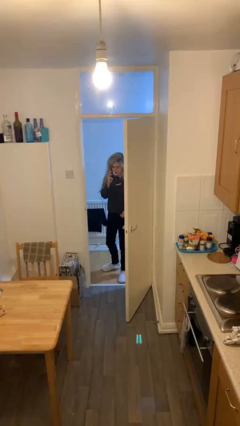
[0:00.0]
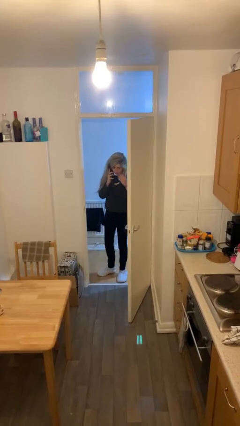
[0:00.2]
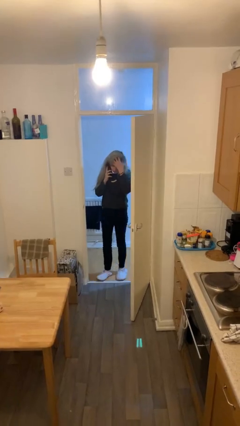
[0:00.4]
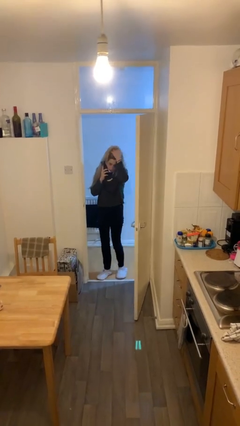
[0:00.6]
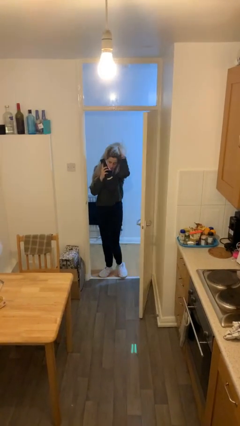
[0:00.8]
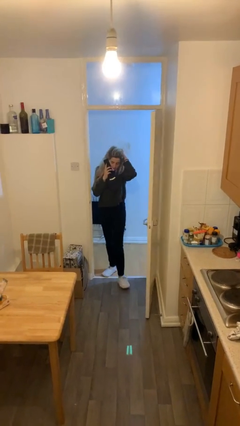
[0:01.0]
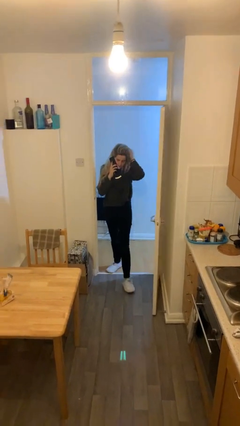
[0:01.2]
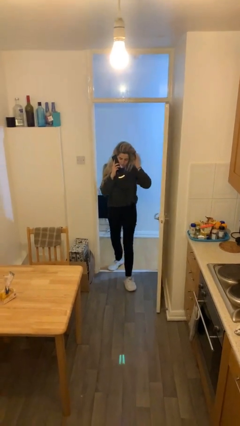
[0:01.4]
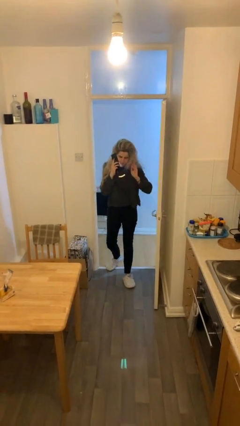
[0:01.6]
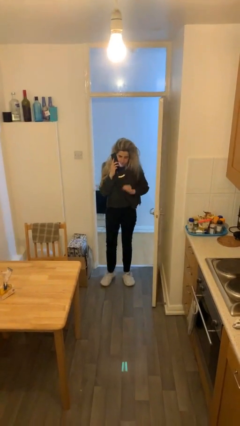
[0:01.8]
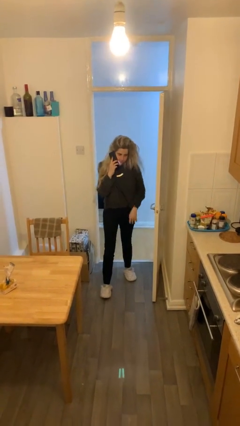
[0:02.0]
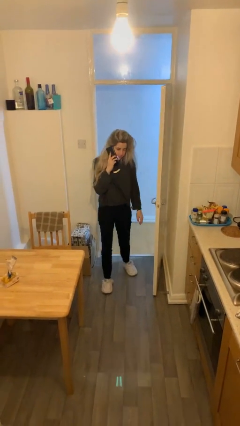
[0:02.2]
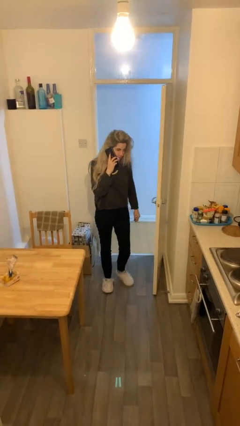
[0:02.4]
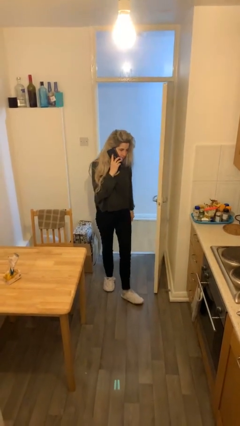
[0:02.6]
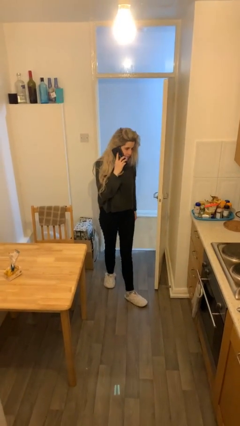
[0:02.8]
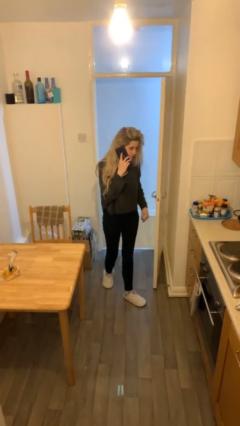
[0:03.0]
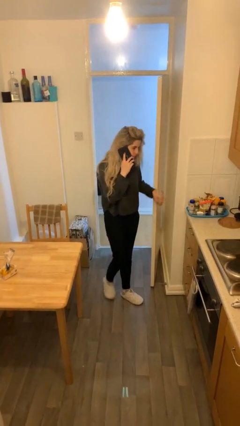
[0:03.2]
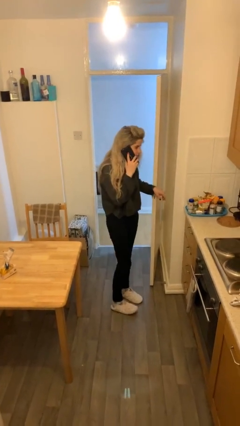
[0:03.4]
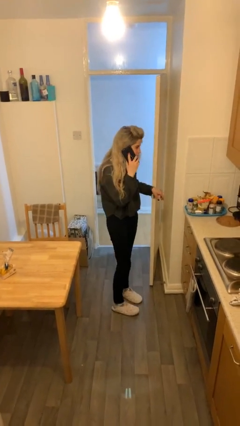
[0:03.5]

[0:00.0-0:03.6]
person enters scene through structure

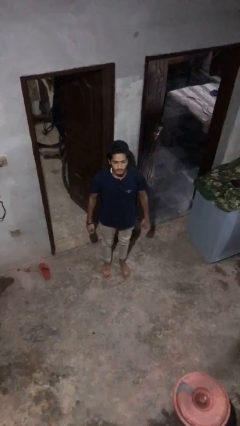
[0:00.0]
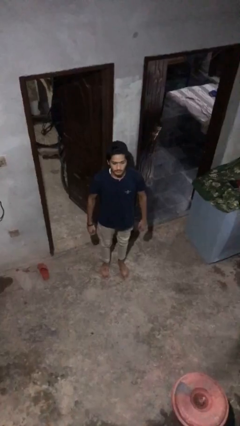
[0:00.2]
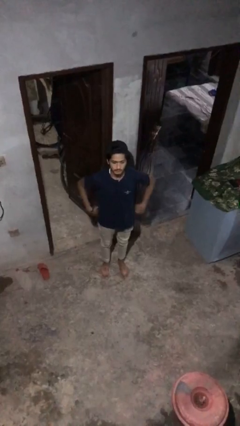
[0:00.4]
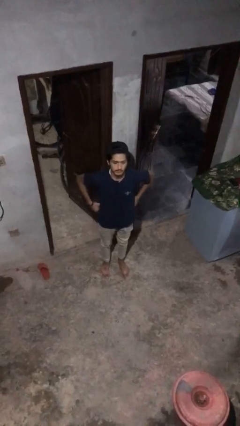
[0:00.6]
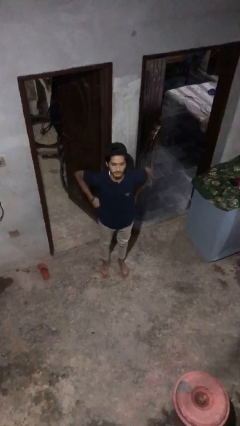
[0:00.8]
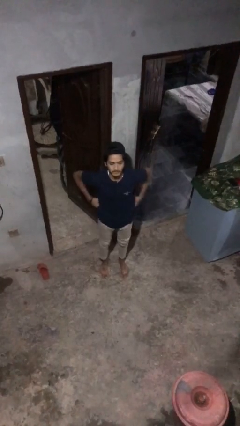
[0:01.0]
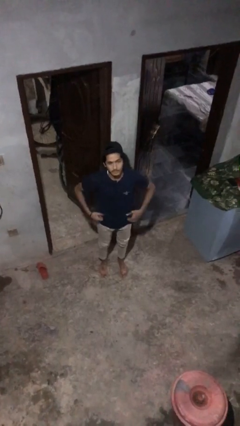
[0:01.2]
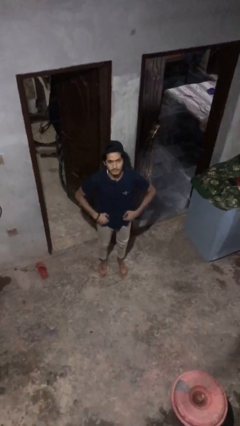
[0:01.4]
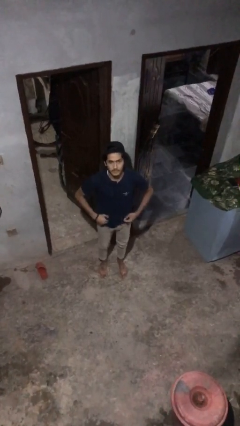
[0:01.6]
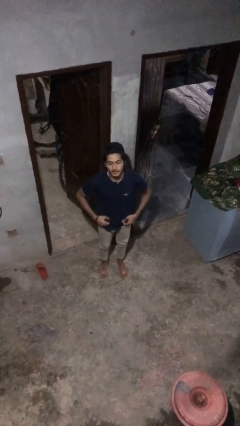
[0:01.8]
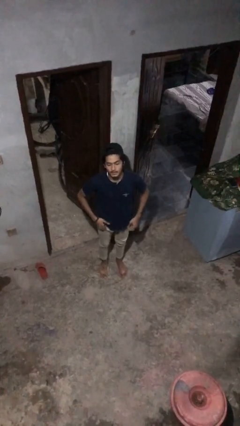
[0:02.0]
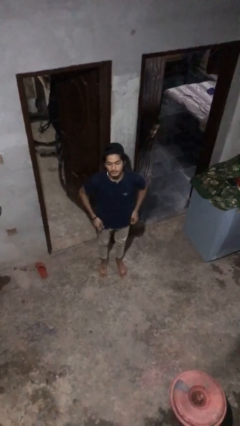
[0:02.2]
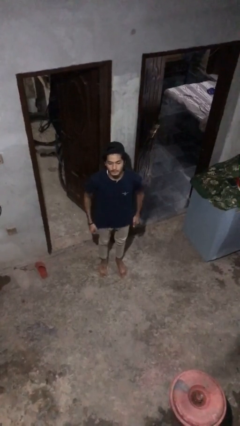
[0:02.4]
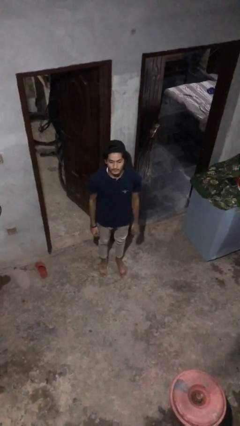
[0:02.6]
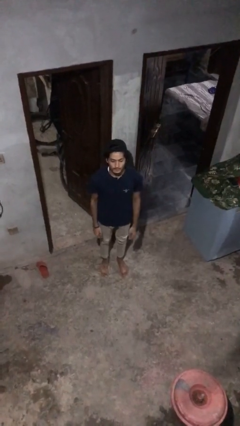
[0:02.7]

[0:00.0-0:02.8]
person hikes up pants

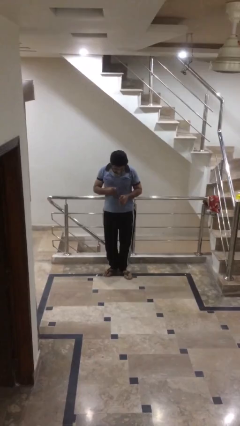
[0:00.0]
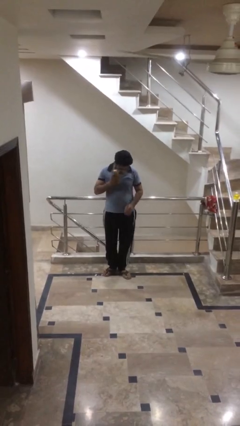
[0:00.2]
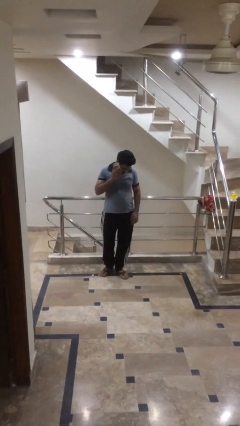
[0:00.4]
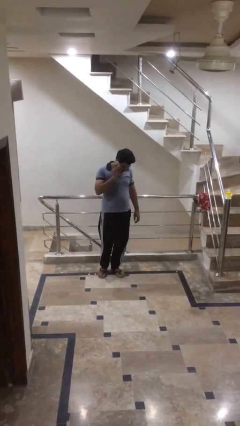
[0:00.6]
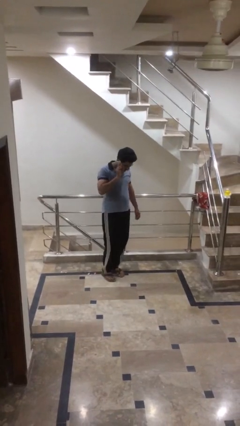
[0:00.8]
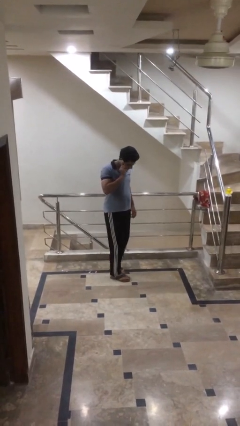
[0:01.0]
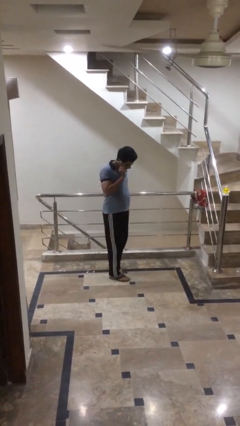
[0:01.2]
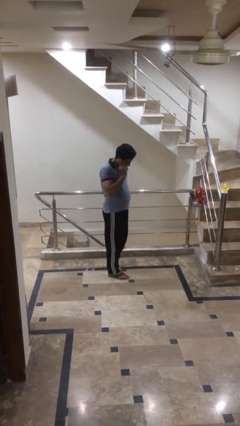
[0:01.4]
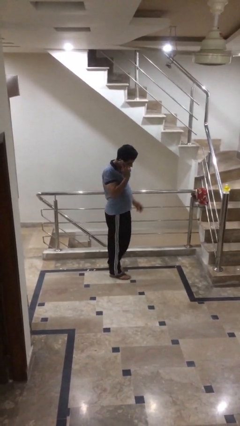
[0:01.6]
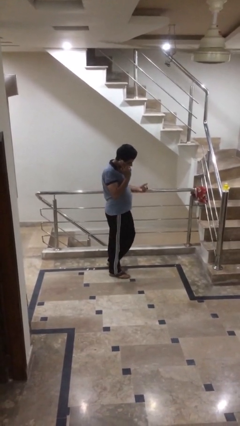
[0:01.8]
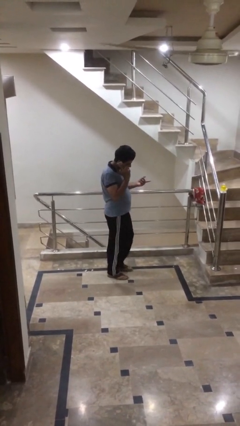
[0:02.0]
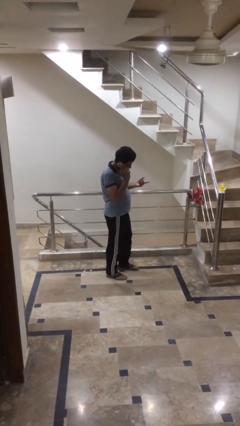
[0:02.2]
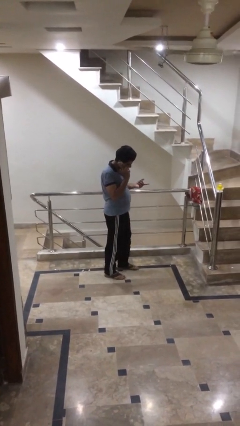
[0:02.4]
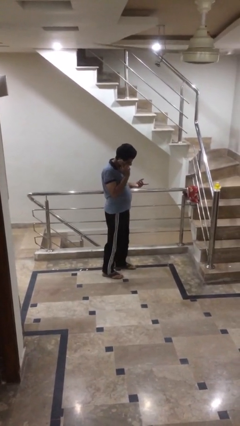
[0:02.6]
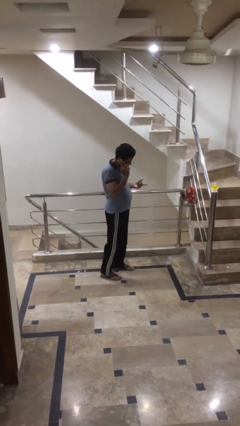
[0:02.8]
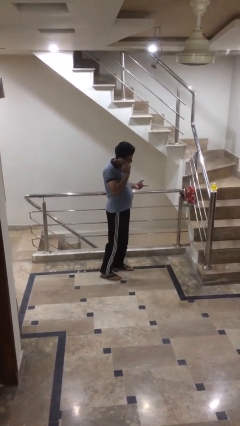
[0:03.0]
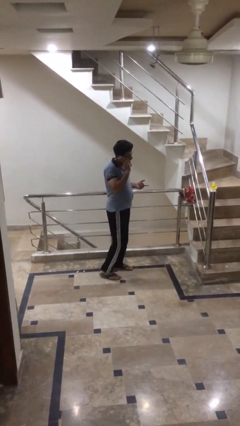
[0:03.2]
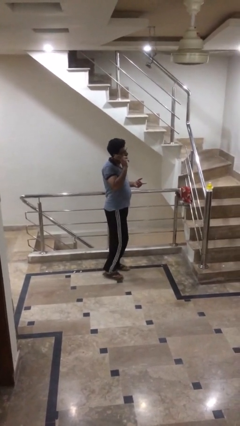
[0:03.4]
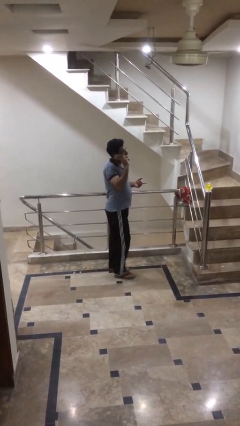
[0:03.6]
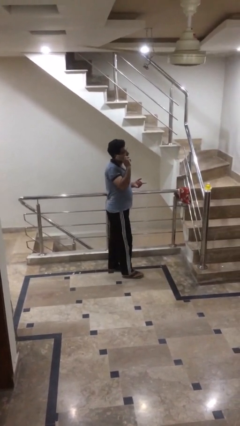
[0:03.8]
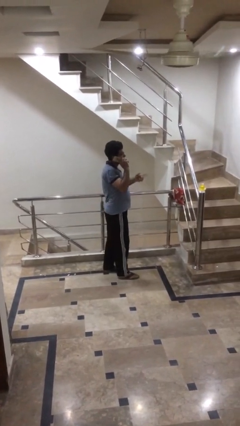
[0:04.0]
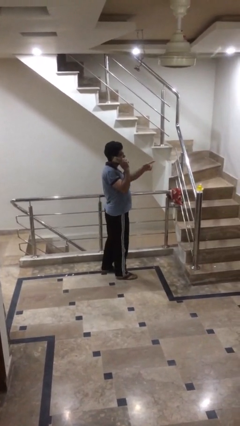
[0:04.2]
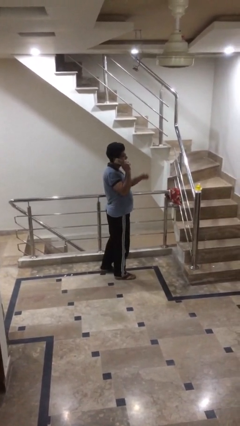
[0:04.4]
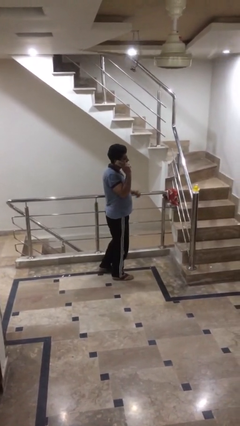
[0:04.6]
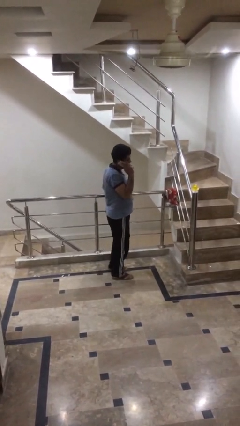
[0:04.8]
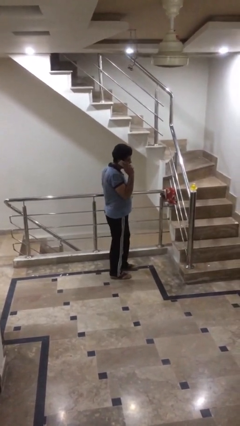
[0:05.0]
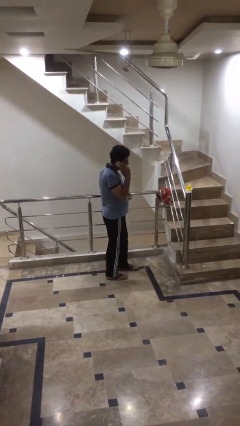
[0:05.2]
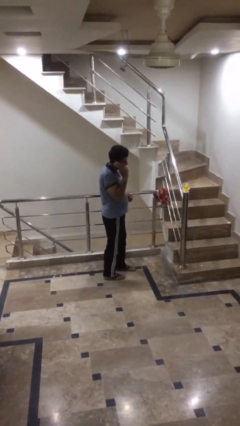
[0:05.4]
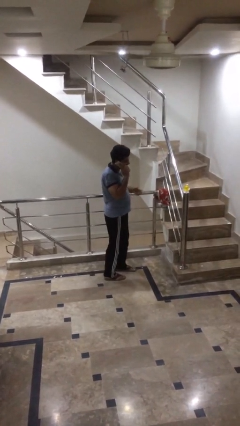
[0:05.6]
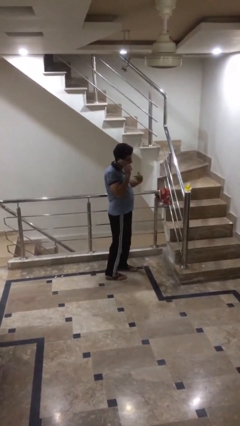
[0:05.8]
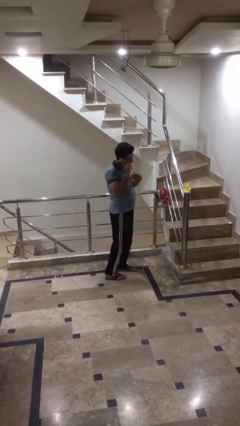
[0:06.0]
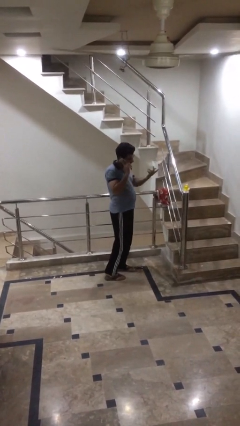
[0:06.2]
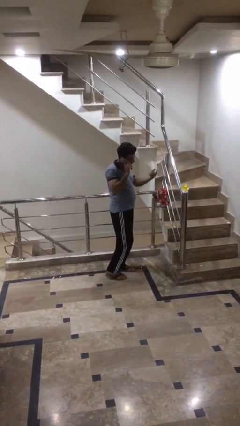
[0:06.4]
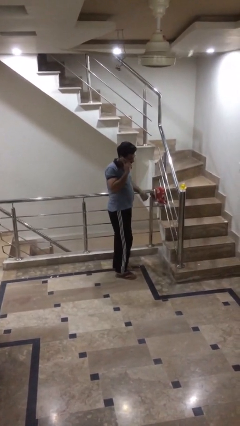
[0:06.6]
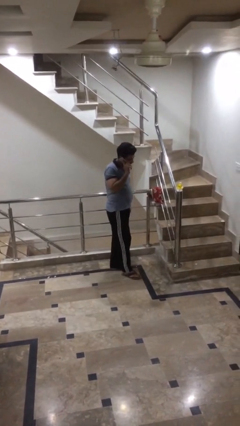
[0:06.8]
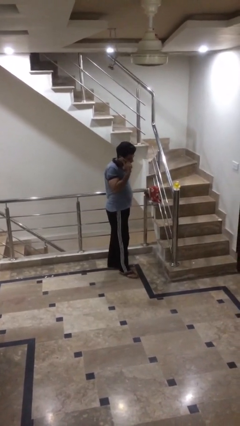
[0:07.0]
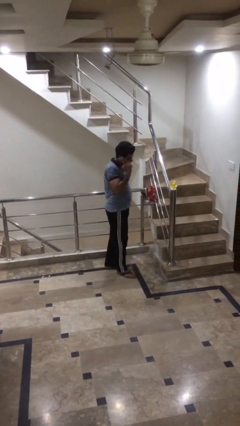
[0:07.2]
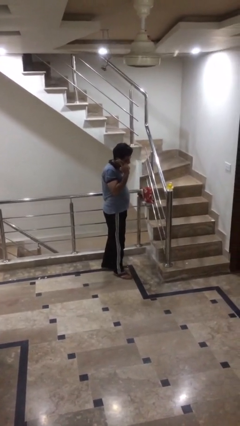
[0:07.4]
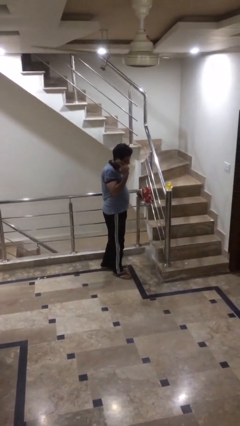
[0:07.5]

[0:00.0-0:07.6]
person talks on phone

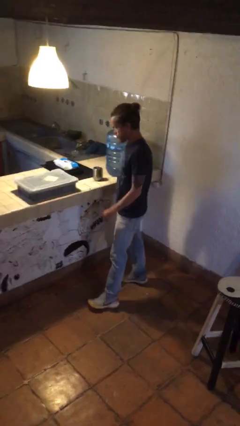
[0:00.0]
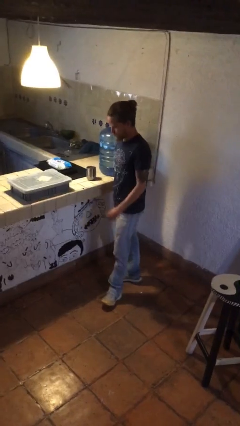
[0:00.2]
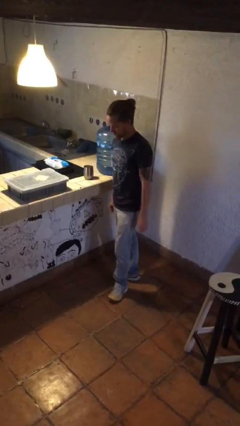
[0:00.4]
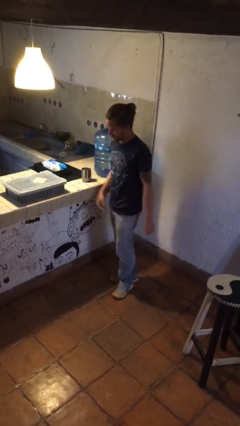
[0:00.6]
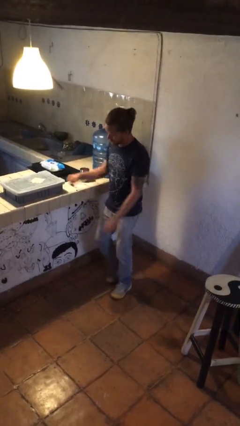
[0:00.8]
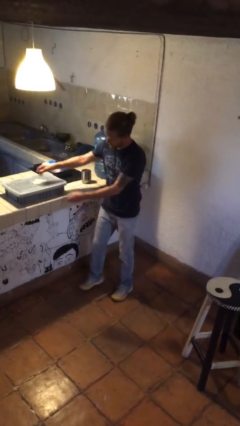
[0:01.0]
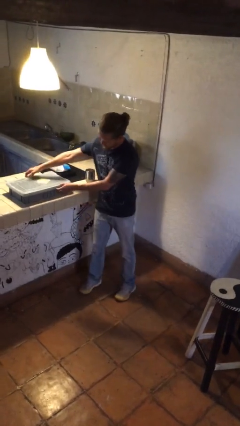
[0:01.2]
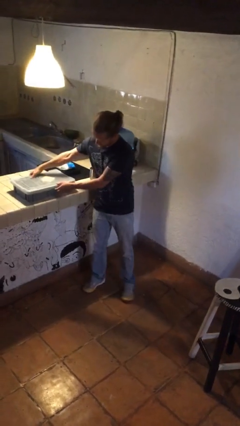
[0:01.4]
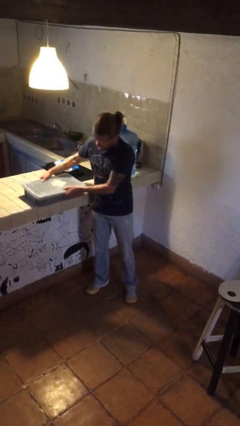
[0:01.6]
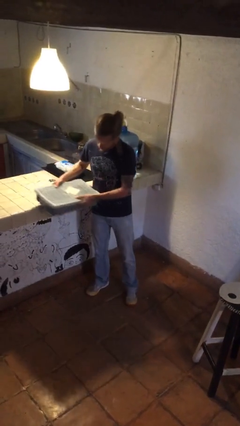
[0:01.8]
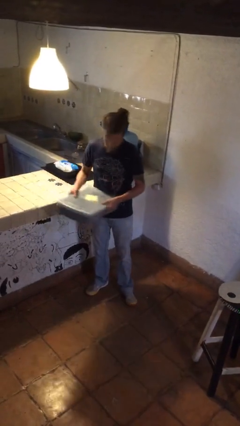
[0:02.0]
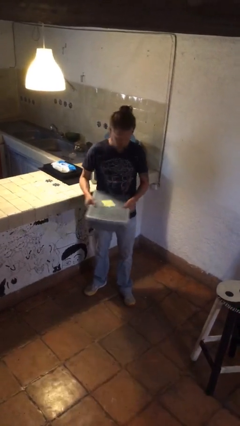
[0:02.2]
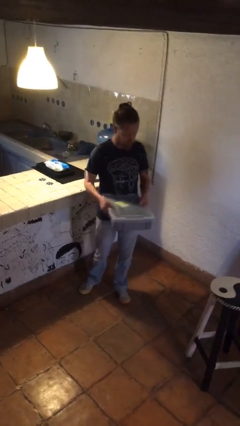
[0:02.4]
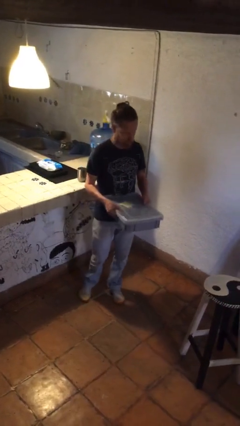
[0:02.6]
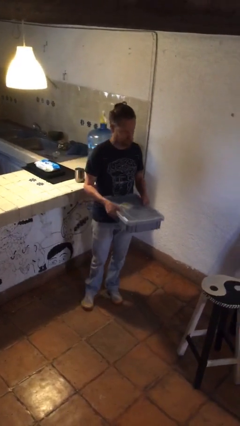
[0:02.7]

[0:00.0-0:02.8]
person picks up object from countertop

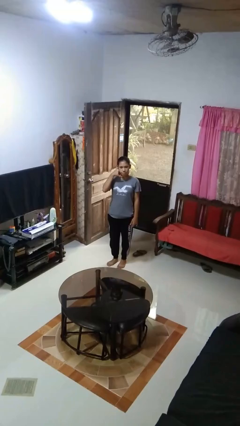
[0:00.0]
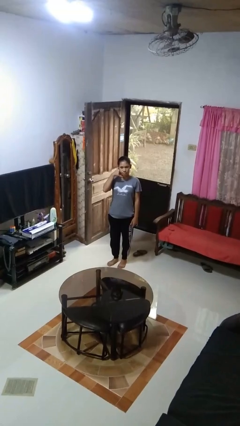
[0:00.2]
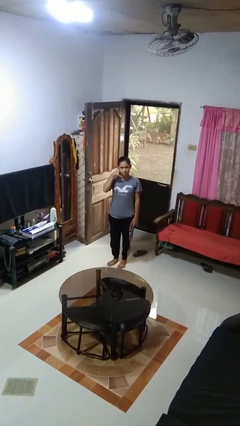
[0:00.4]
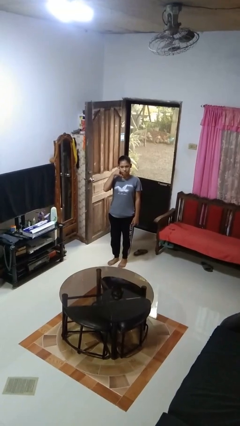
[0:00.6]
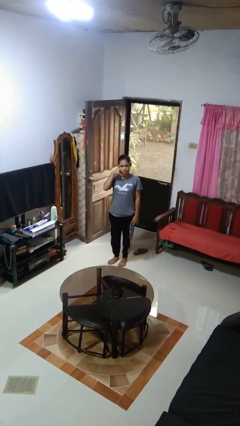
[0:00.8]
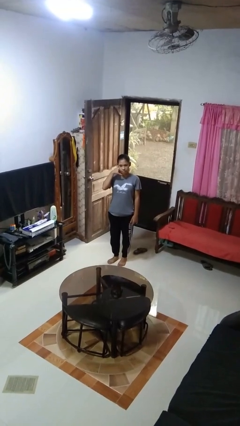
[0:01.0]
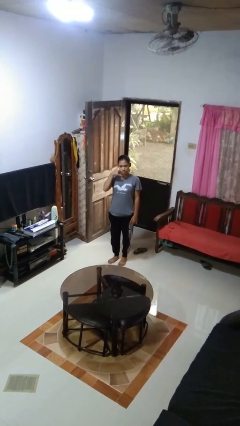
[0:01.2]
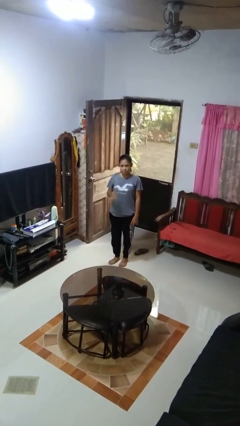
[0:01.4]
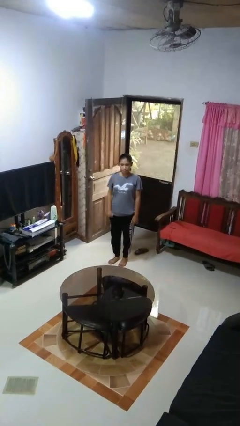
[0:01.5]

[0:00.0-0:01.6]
person gestures call me
